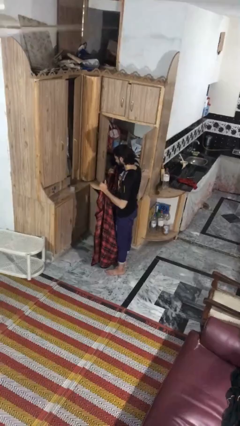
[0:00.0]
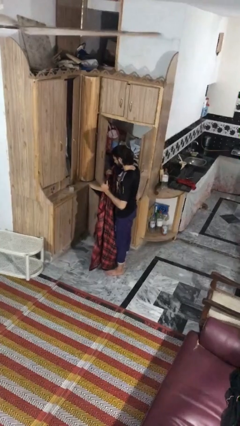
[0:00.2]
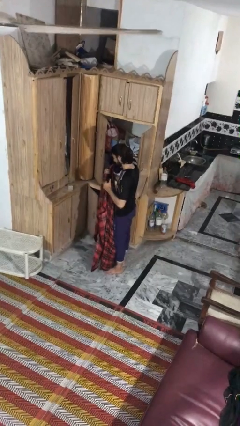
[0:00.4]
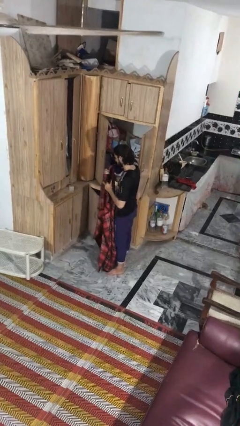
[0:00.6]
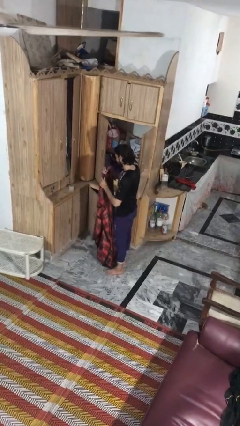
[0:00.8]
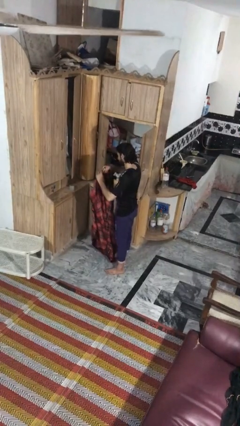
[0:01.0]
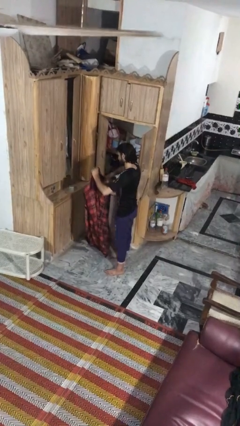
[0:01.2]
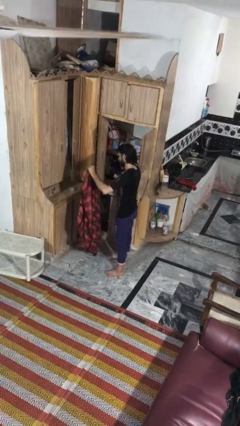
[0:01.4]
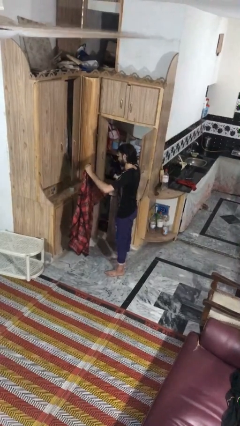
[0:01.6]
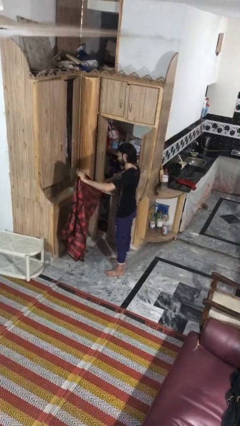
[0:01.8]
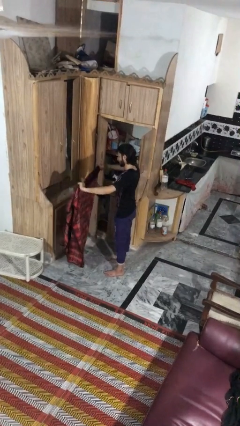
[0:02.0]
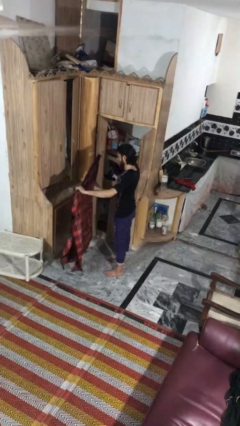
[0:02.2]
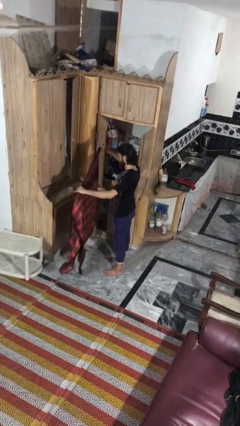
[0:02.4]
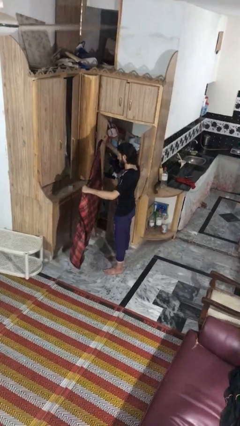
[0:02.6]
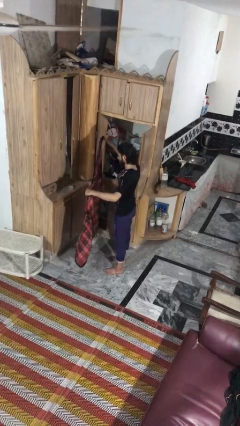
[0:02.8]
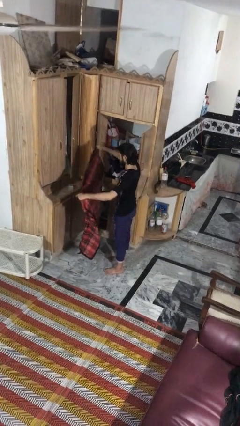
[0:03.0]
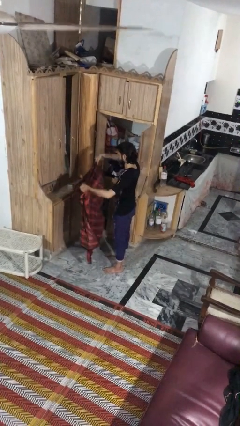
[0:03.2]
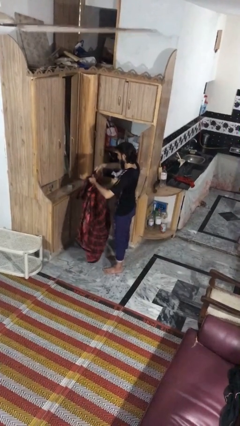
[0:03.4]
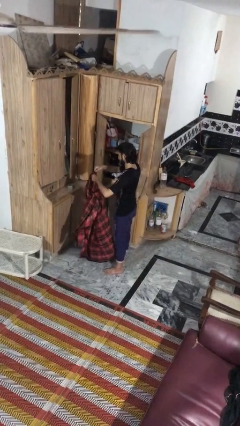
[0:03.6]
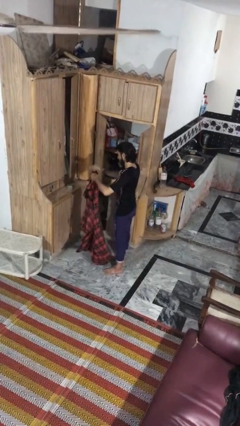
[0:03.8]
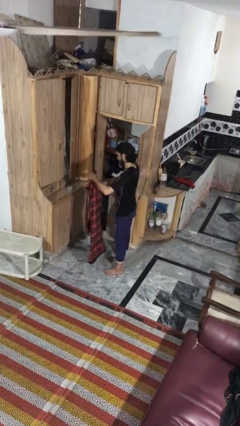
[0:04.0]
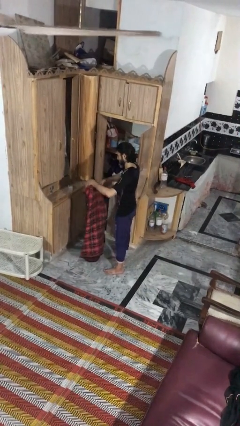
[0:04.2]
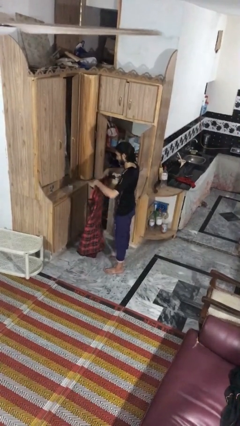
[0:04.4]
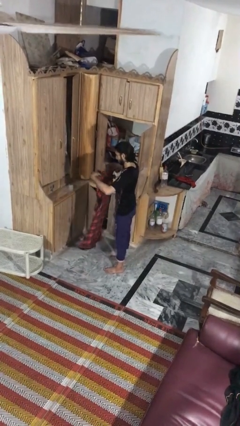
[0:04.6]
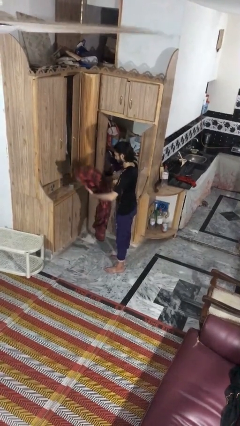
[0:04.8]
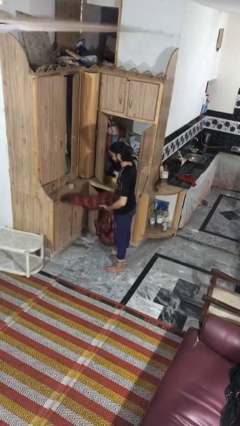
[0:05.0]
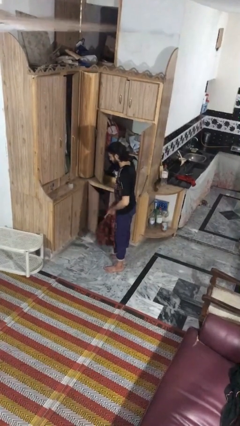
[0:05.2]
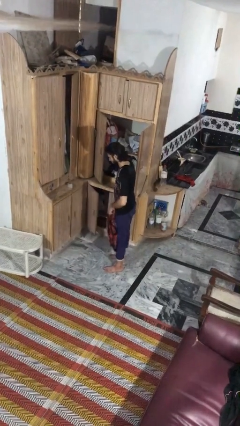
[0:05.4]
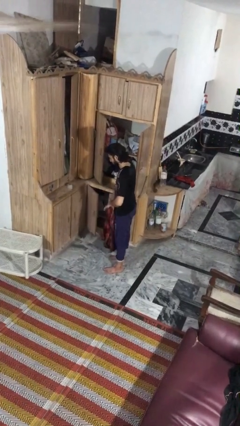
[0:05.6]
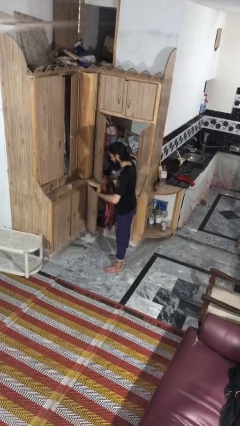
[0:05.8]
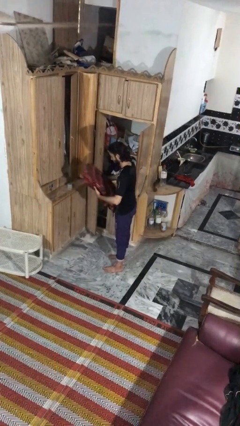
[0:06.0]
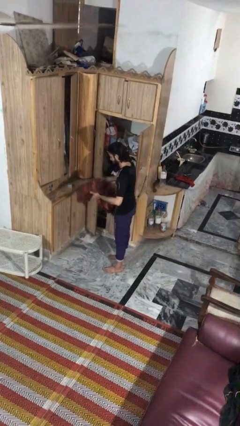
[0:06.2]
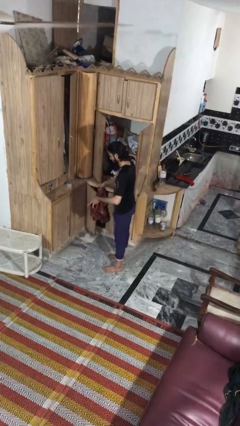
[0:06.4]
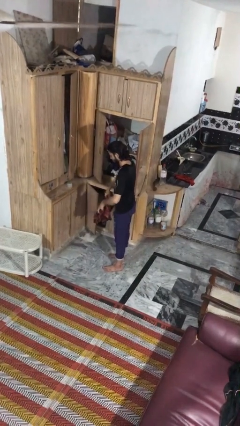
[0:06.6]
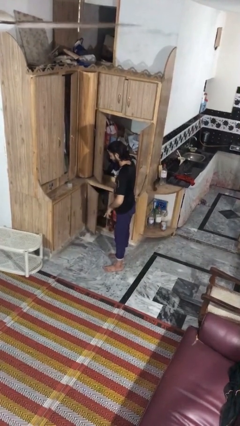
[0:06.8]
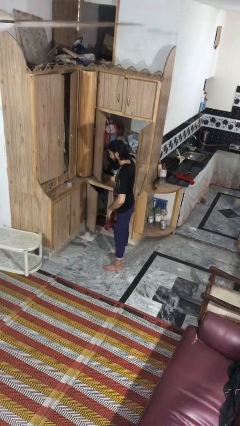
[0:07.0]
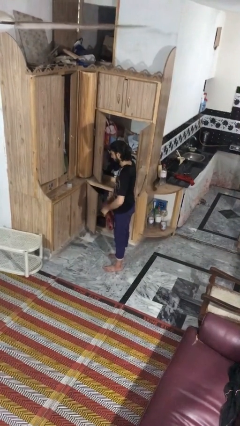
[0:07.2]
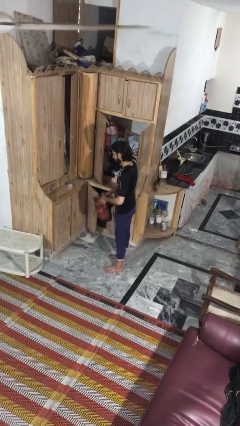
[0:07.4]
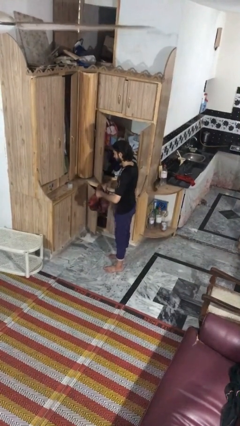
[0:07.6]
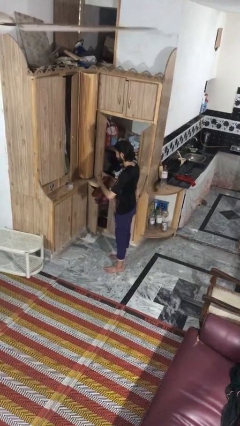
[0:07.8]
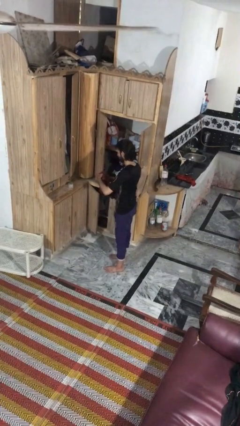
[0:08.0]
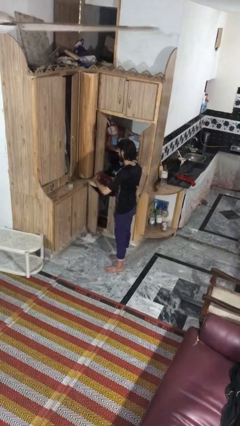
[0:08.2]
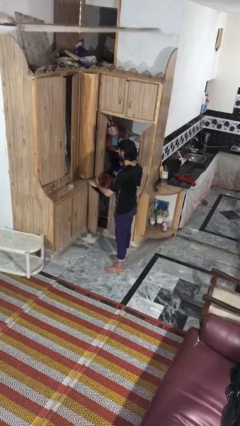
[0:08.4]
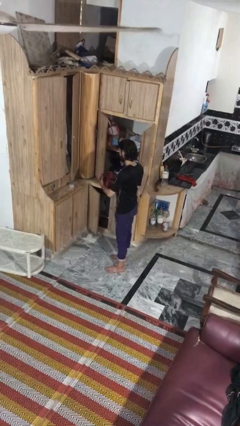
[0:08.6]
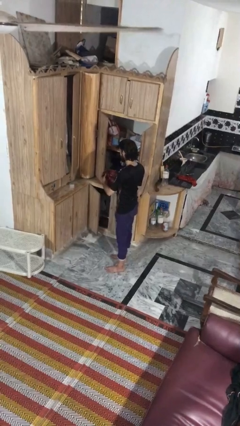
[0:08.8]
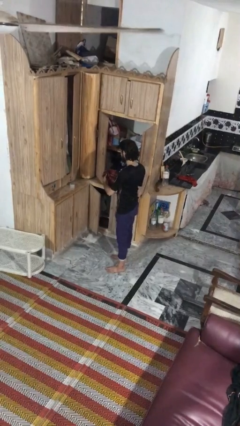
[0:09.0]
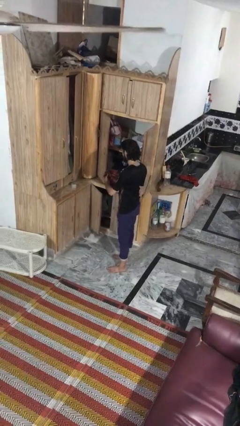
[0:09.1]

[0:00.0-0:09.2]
person folds blanket

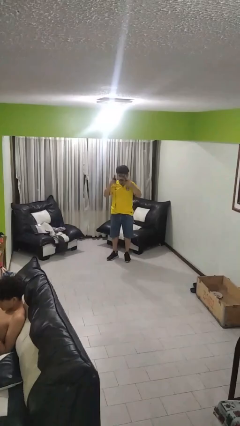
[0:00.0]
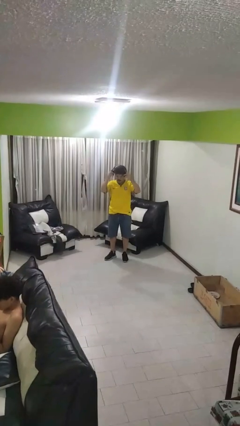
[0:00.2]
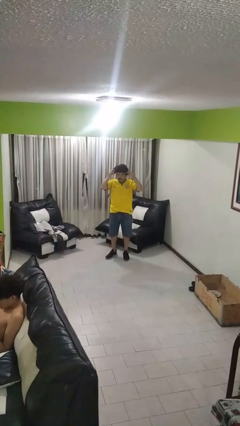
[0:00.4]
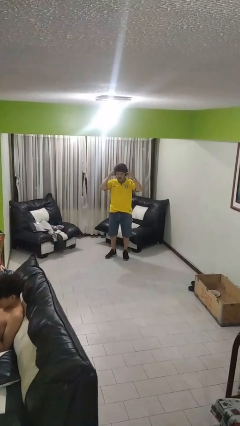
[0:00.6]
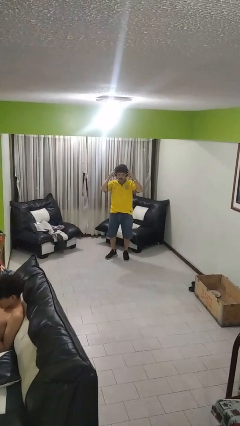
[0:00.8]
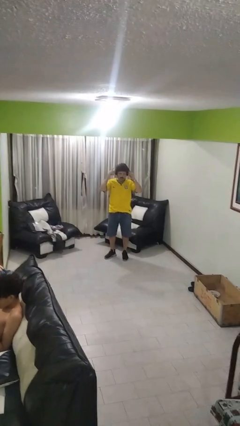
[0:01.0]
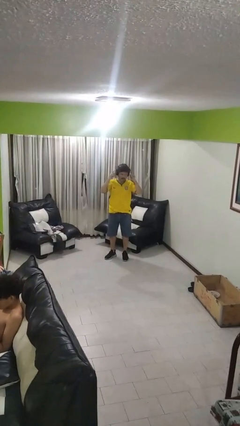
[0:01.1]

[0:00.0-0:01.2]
person puts on headphones

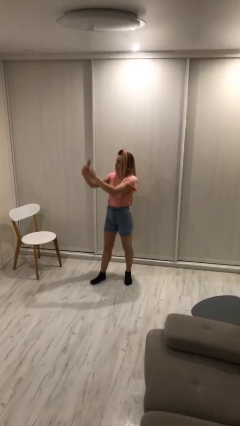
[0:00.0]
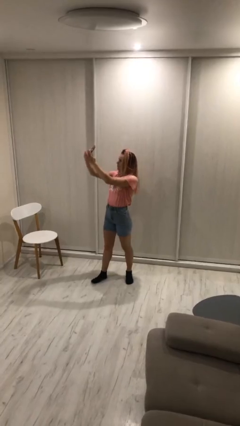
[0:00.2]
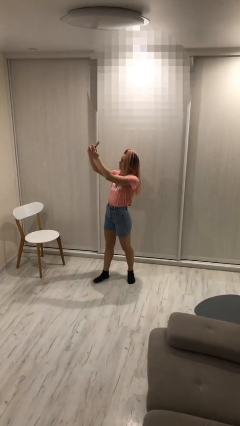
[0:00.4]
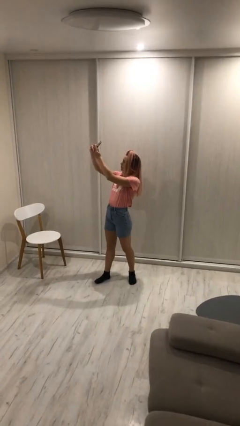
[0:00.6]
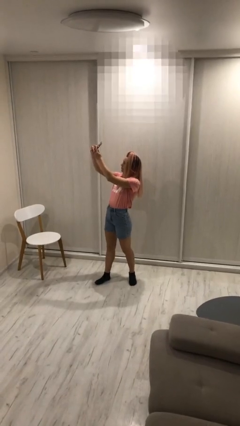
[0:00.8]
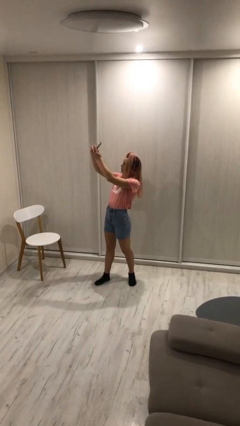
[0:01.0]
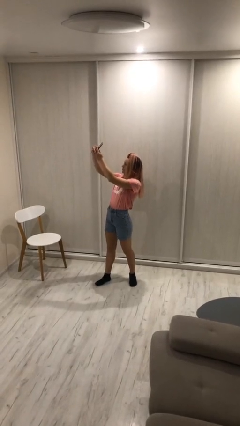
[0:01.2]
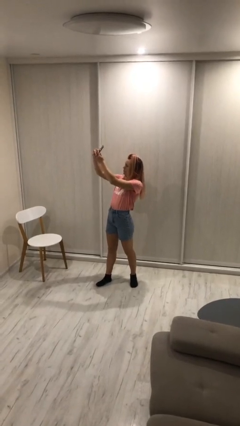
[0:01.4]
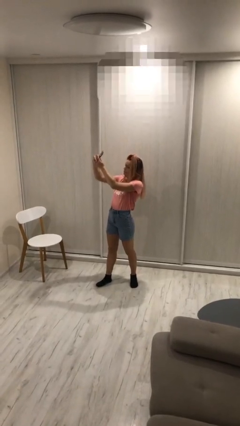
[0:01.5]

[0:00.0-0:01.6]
person takes selfie

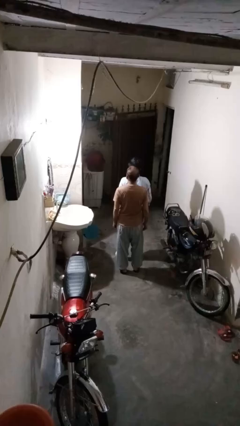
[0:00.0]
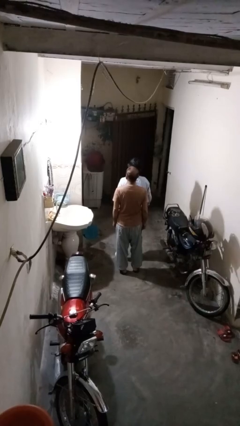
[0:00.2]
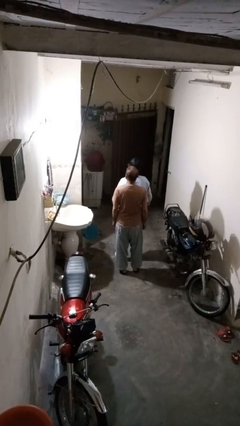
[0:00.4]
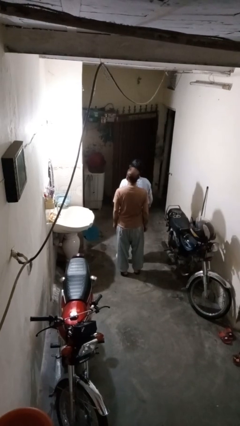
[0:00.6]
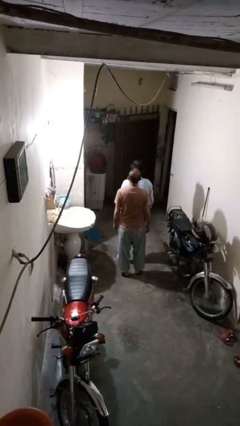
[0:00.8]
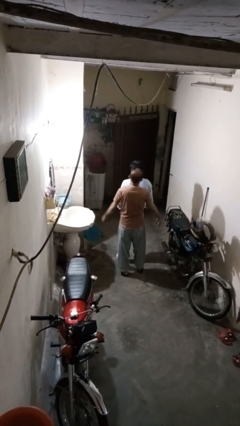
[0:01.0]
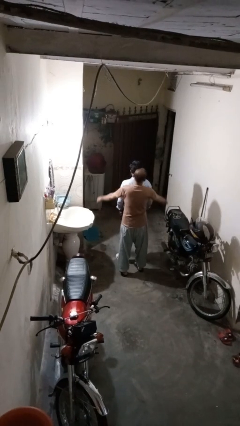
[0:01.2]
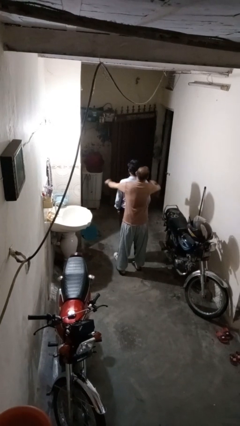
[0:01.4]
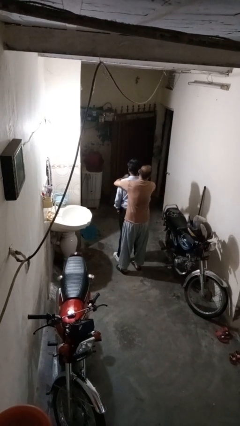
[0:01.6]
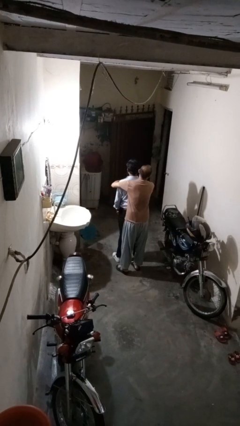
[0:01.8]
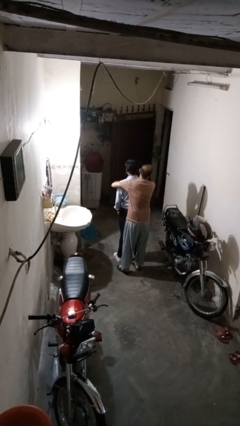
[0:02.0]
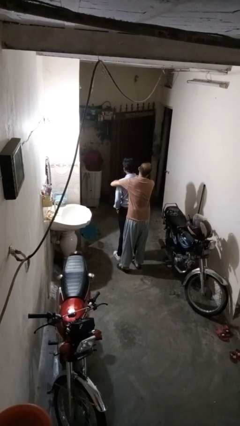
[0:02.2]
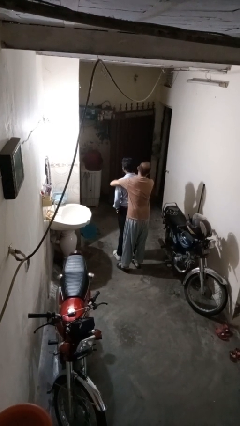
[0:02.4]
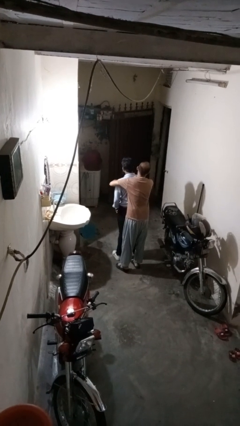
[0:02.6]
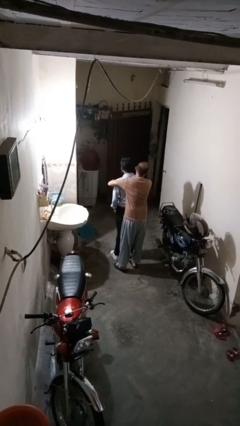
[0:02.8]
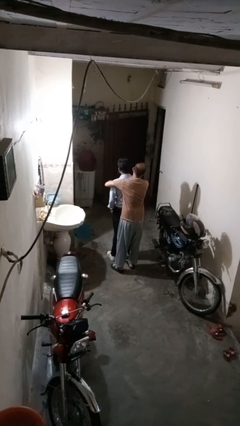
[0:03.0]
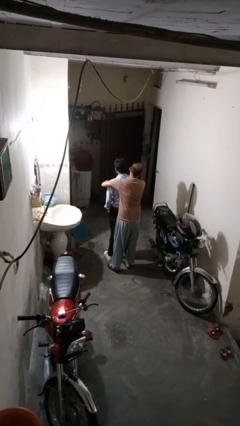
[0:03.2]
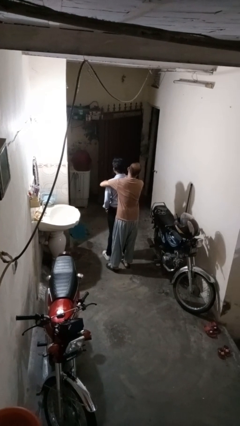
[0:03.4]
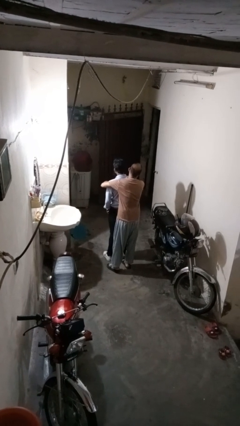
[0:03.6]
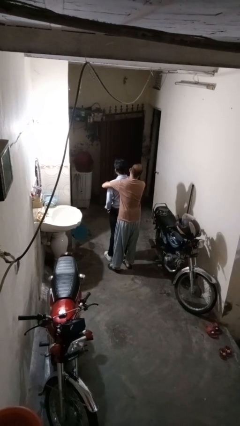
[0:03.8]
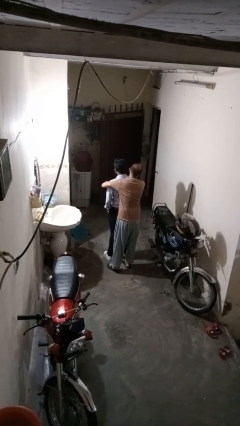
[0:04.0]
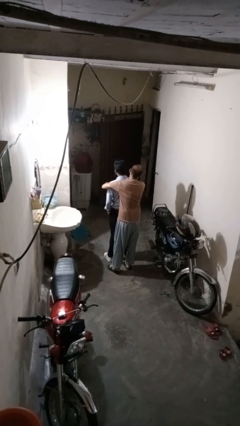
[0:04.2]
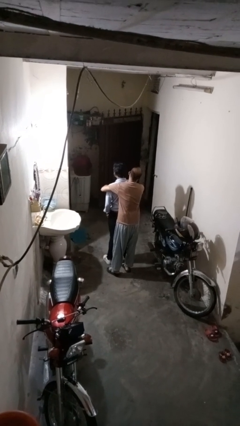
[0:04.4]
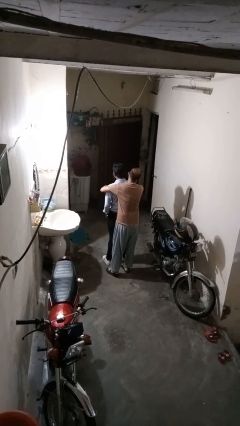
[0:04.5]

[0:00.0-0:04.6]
person hugs person from behind

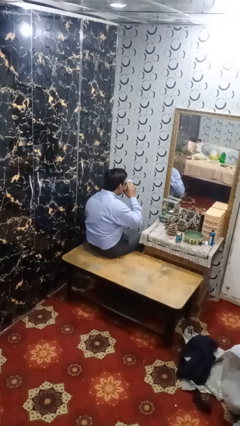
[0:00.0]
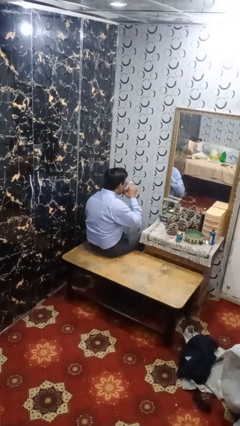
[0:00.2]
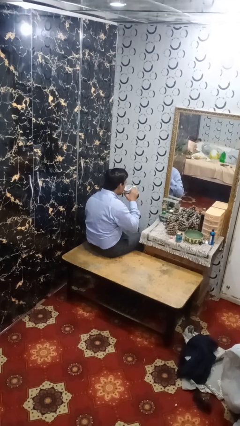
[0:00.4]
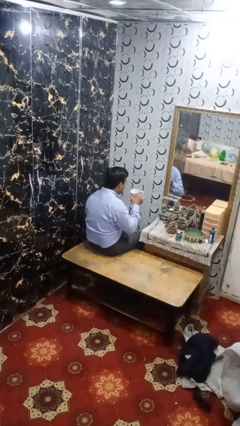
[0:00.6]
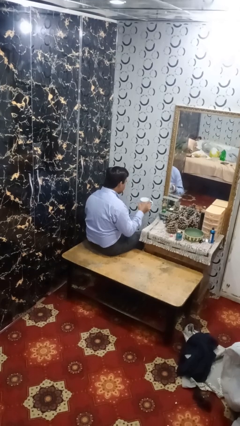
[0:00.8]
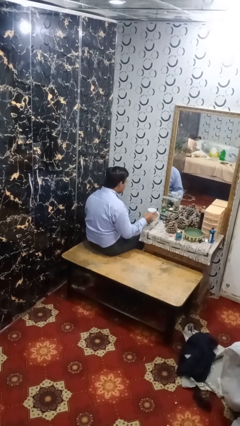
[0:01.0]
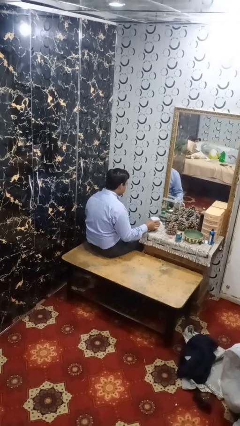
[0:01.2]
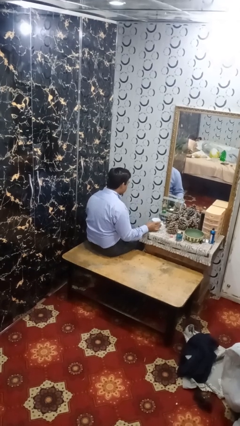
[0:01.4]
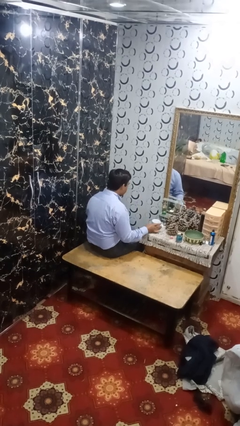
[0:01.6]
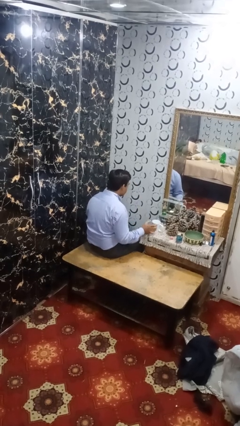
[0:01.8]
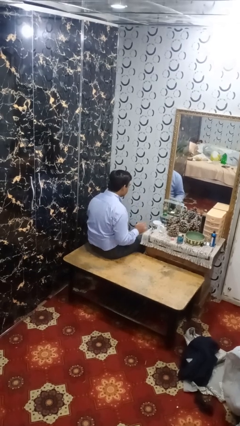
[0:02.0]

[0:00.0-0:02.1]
person puts down object on table
